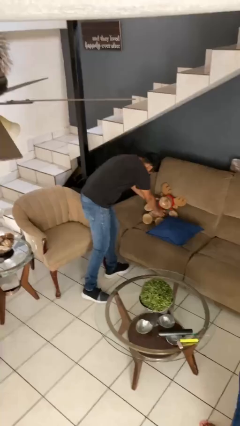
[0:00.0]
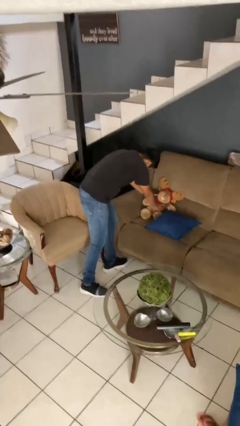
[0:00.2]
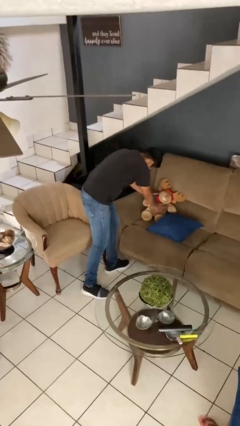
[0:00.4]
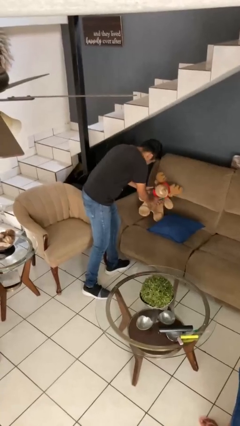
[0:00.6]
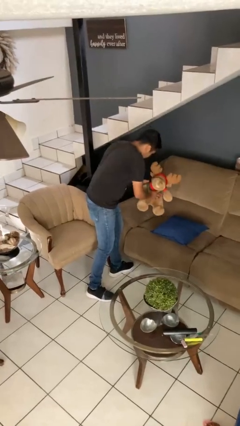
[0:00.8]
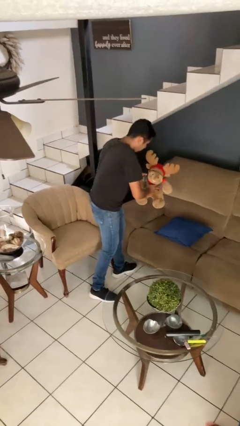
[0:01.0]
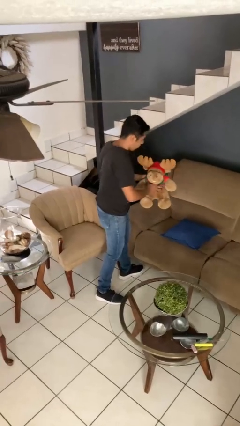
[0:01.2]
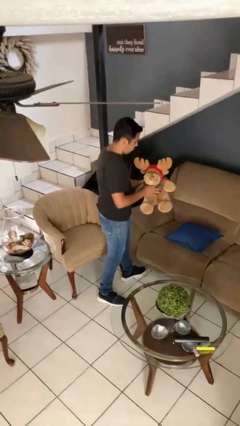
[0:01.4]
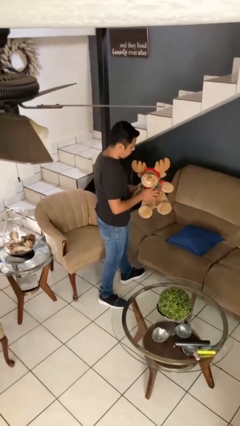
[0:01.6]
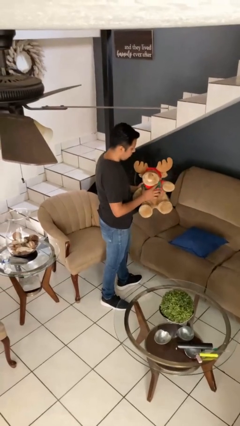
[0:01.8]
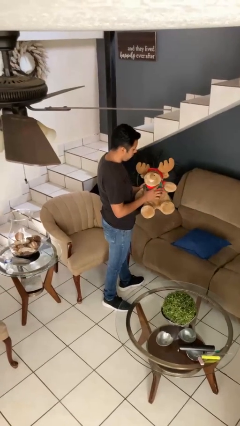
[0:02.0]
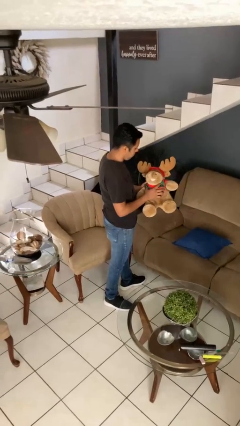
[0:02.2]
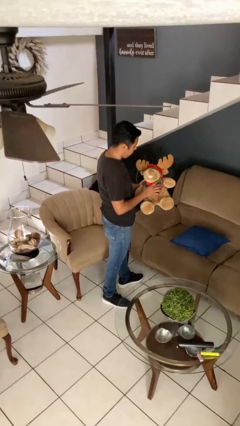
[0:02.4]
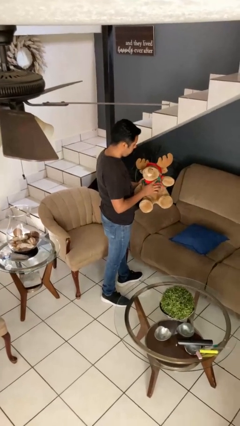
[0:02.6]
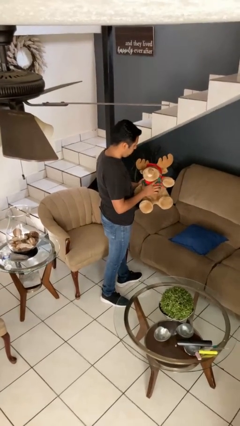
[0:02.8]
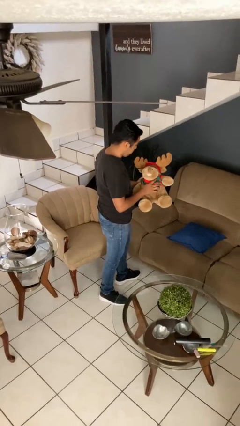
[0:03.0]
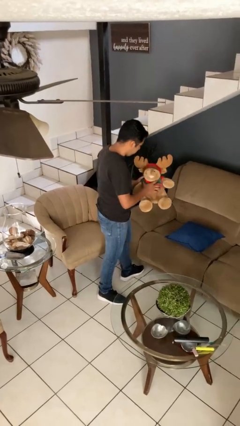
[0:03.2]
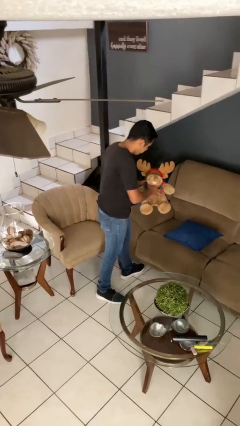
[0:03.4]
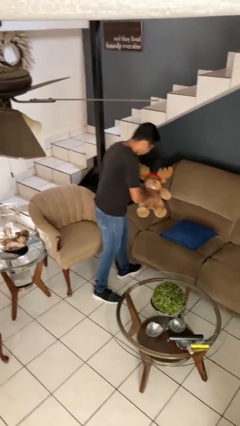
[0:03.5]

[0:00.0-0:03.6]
person picks up object from couch

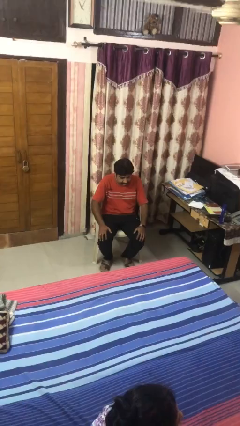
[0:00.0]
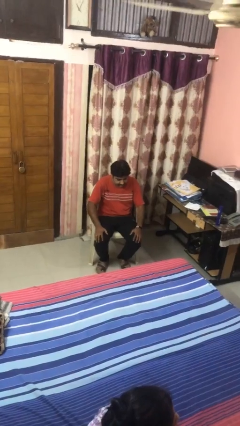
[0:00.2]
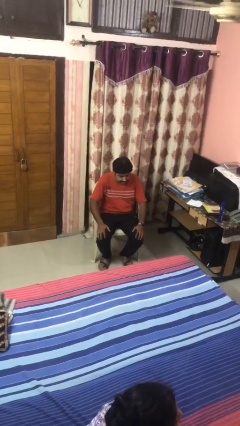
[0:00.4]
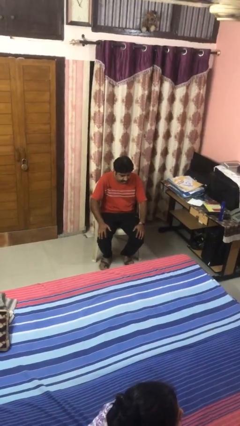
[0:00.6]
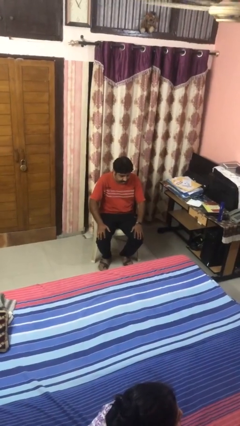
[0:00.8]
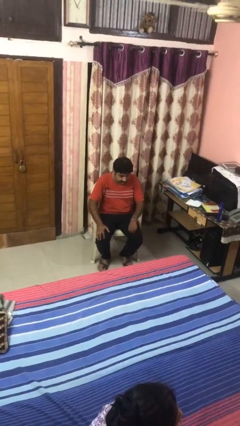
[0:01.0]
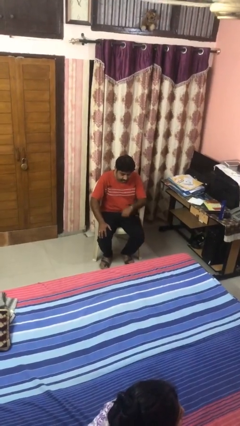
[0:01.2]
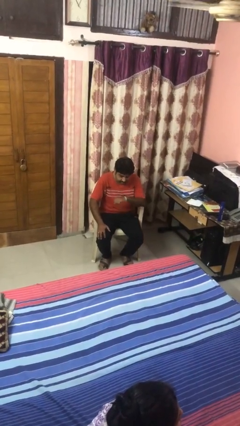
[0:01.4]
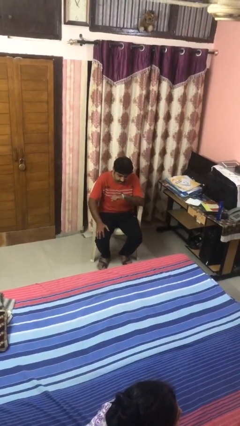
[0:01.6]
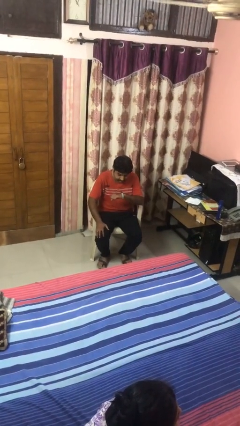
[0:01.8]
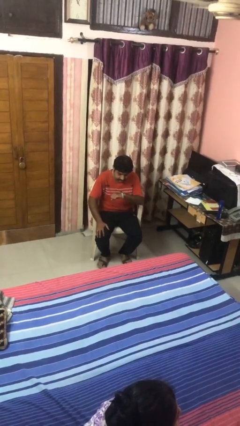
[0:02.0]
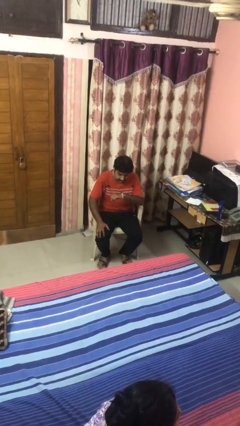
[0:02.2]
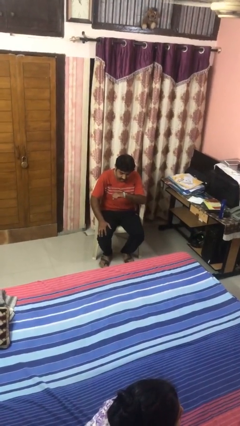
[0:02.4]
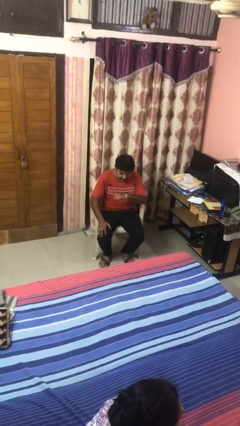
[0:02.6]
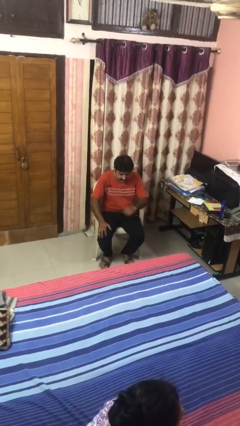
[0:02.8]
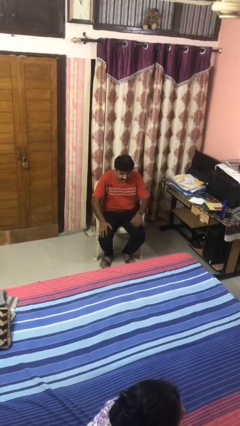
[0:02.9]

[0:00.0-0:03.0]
person looks at wristwatch

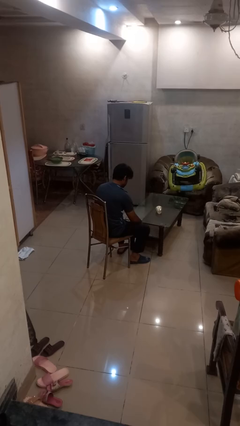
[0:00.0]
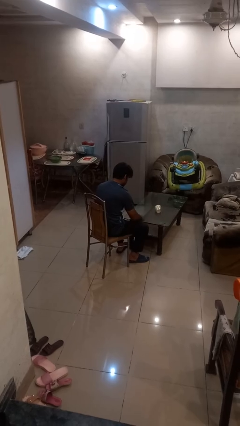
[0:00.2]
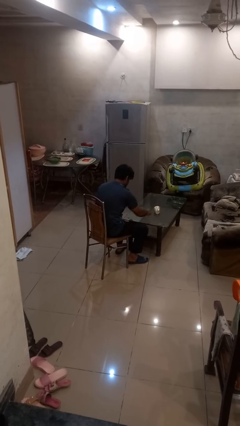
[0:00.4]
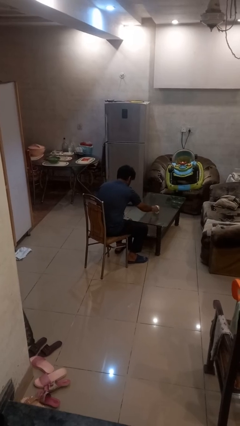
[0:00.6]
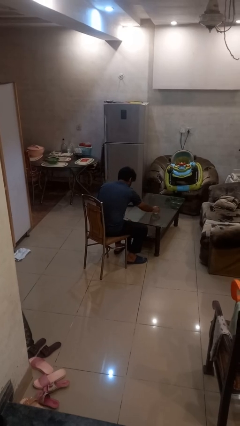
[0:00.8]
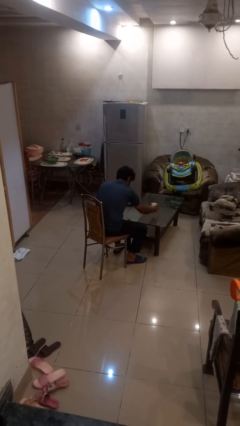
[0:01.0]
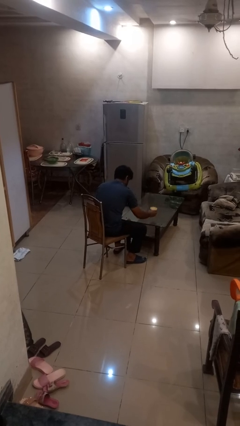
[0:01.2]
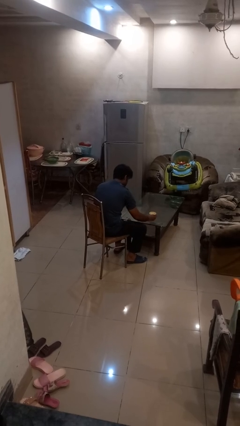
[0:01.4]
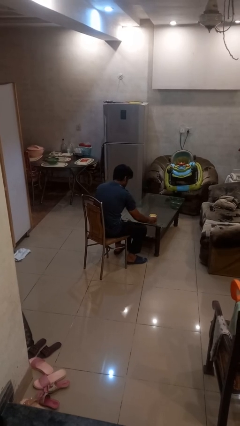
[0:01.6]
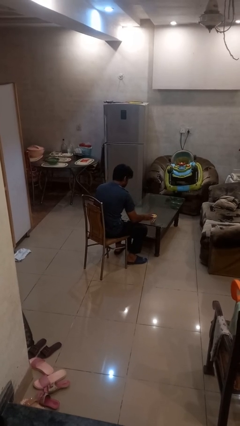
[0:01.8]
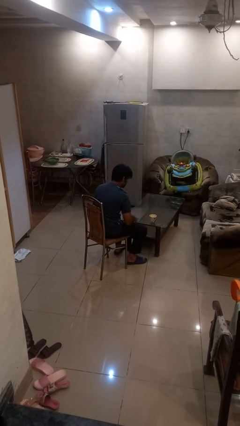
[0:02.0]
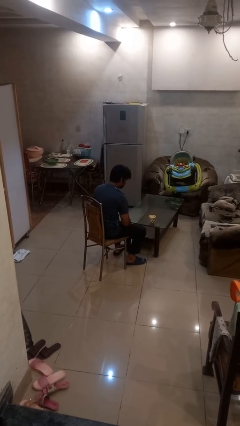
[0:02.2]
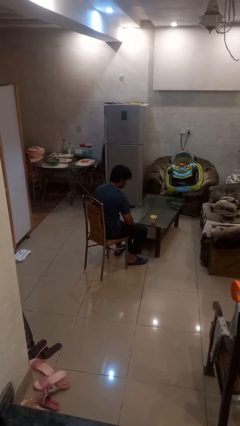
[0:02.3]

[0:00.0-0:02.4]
person sets upright glass

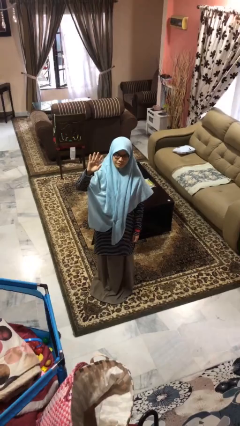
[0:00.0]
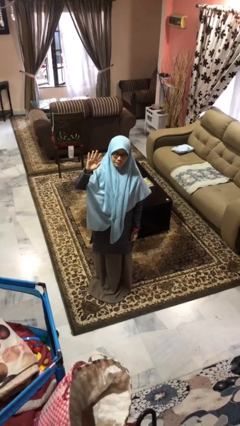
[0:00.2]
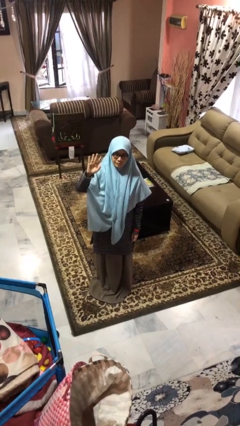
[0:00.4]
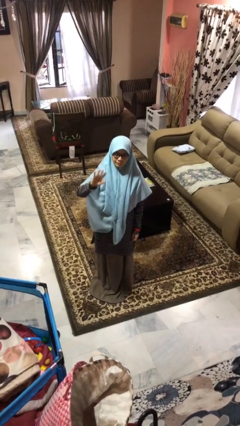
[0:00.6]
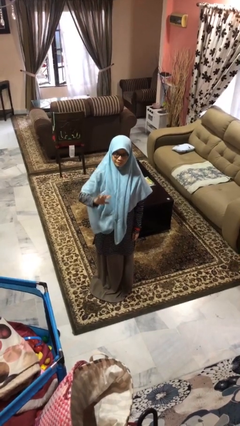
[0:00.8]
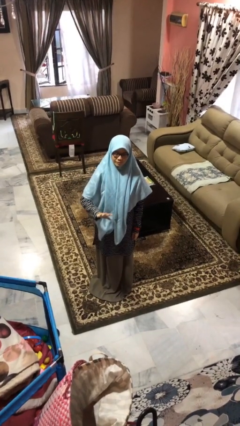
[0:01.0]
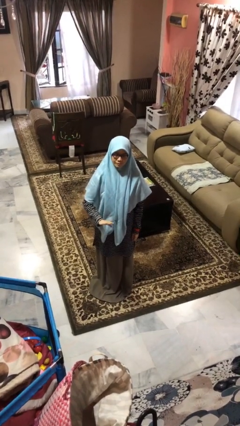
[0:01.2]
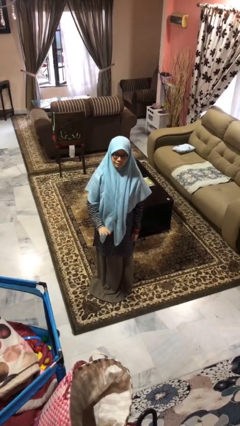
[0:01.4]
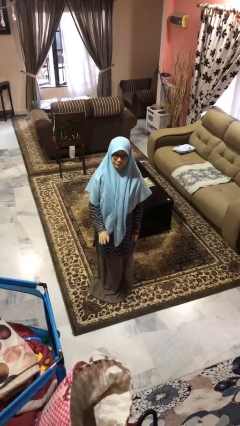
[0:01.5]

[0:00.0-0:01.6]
person gestures swipe down

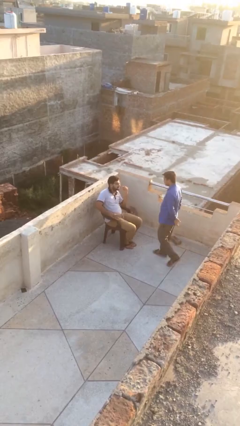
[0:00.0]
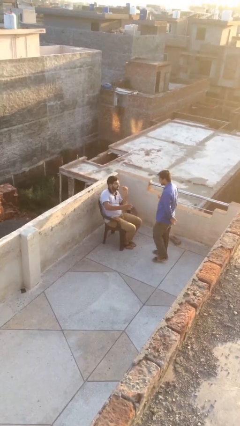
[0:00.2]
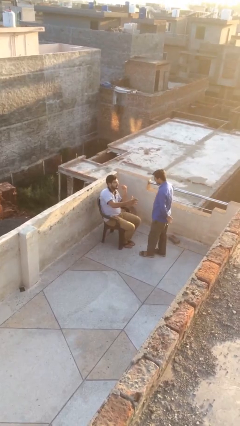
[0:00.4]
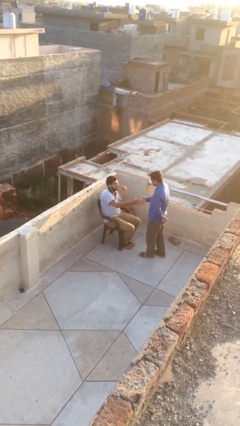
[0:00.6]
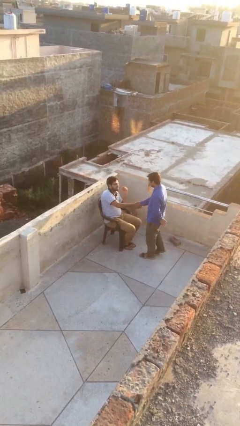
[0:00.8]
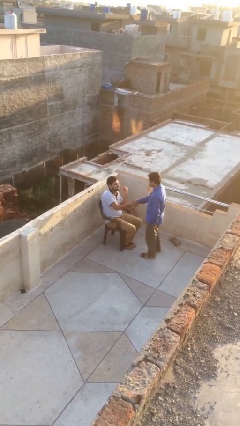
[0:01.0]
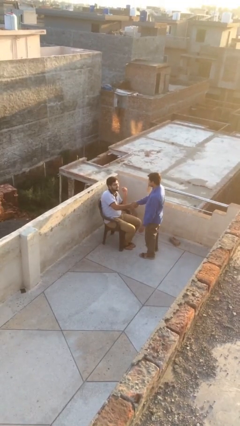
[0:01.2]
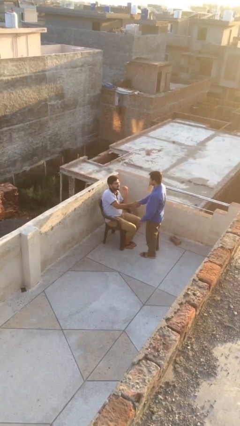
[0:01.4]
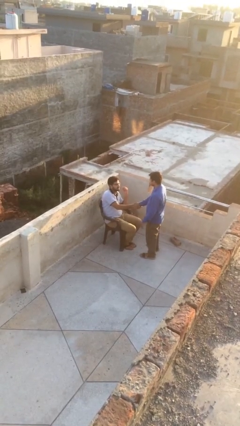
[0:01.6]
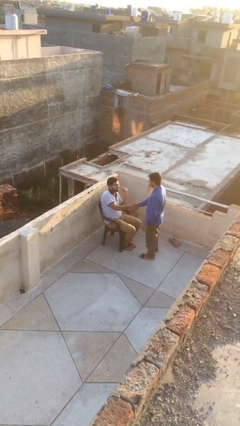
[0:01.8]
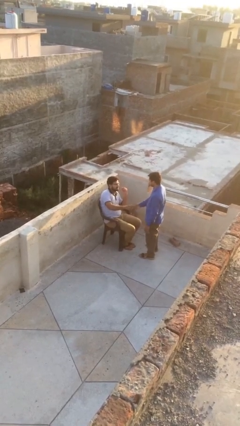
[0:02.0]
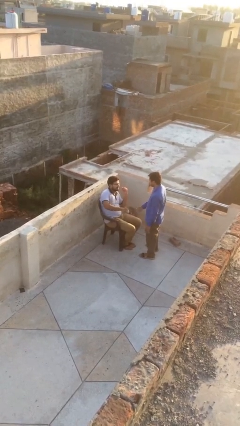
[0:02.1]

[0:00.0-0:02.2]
person shakes hand

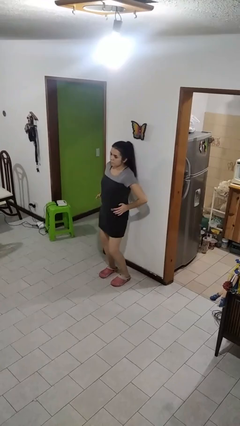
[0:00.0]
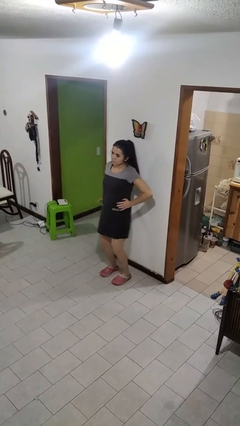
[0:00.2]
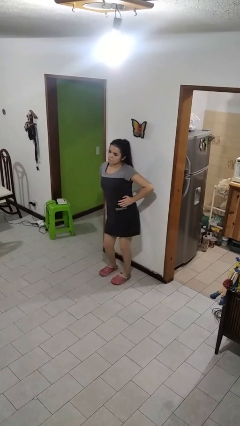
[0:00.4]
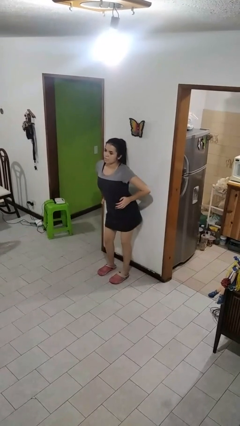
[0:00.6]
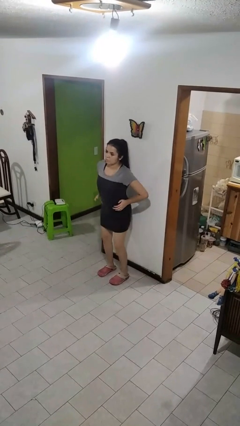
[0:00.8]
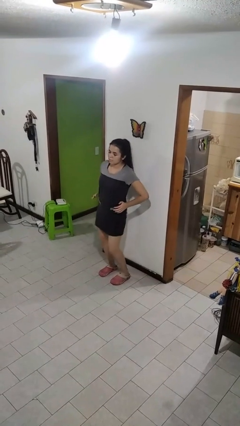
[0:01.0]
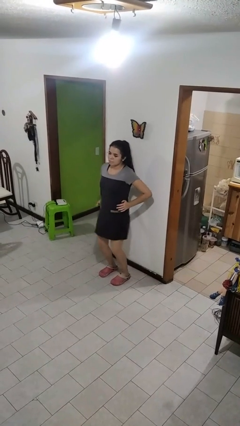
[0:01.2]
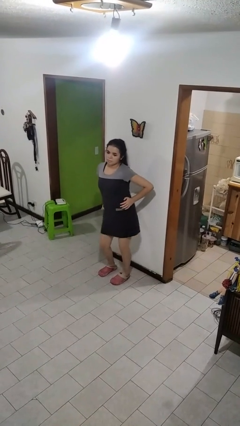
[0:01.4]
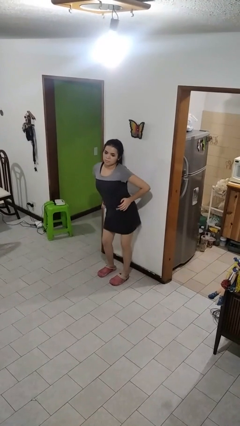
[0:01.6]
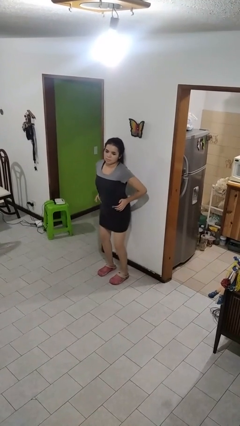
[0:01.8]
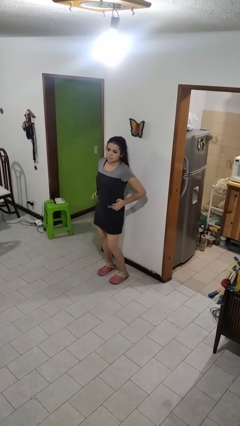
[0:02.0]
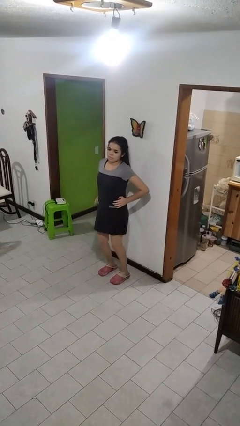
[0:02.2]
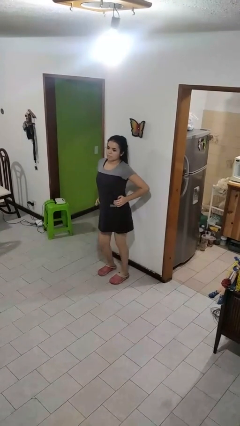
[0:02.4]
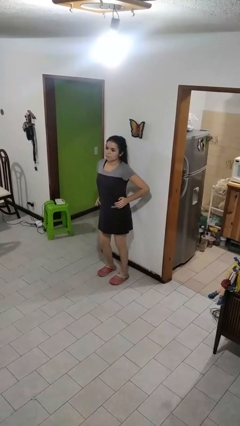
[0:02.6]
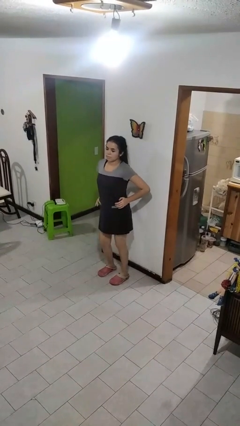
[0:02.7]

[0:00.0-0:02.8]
person wiggles hips

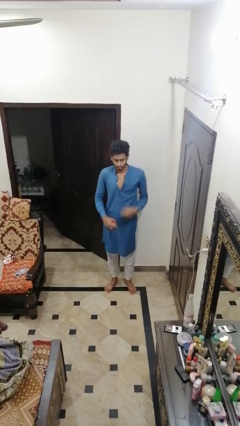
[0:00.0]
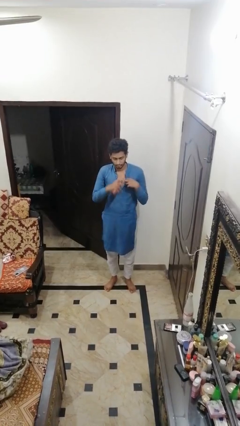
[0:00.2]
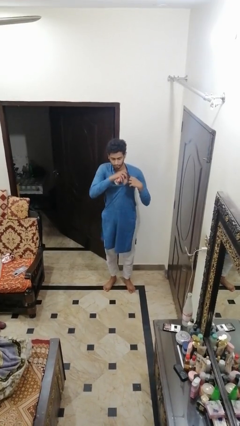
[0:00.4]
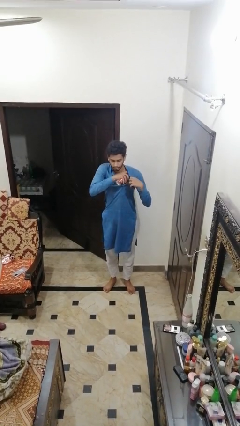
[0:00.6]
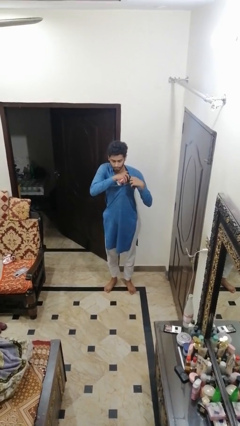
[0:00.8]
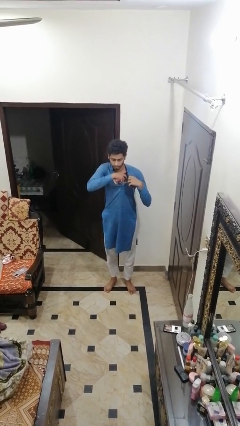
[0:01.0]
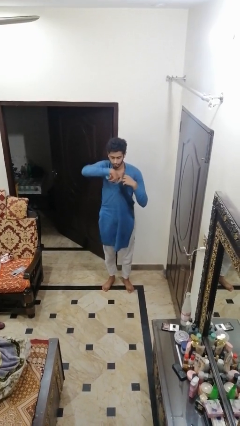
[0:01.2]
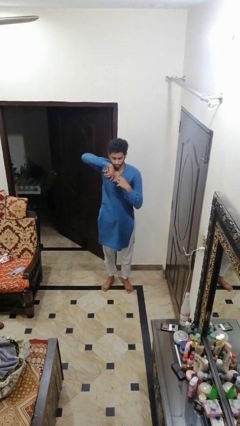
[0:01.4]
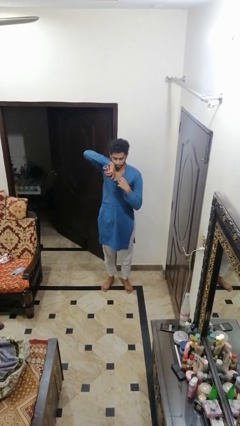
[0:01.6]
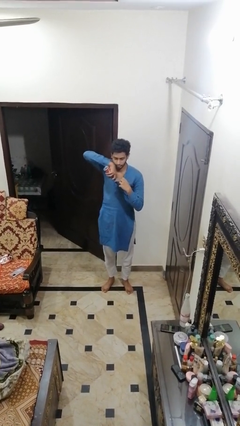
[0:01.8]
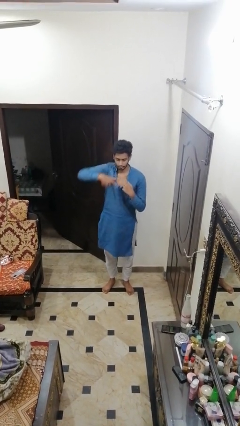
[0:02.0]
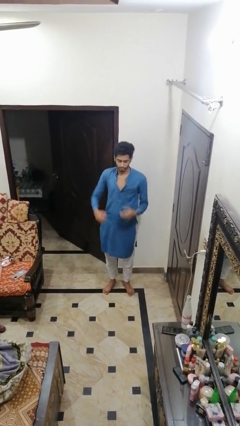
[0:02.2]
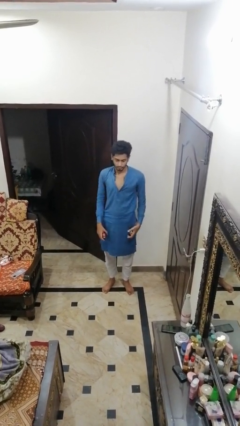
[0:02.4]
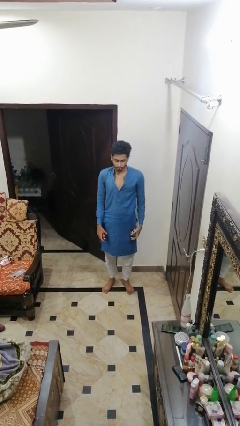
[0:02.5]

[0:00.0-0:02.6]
person applies deodorant
